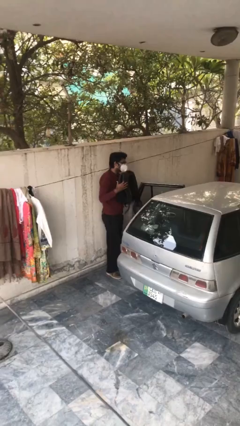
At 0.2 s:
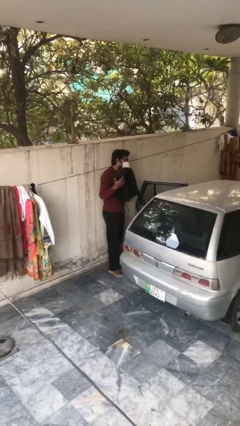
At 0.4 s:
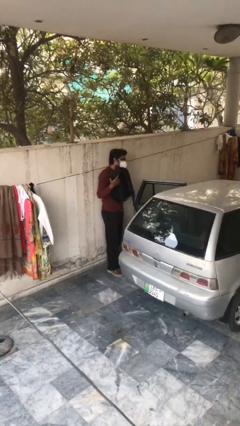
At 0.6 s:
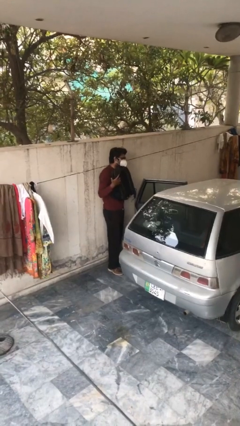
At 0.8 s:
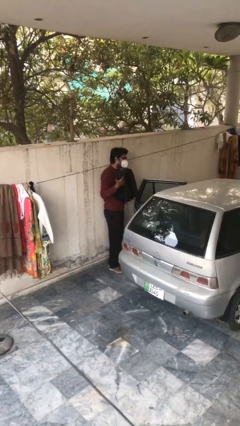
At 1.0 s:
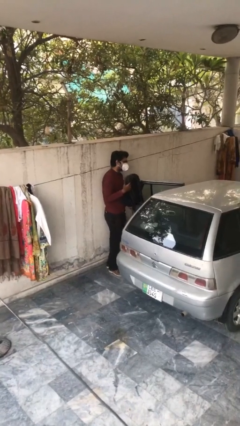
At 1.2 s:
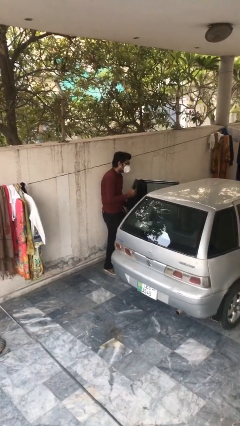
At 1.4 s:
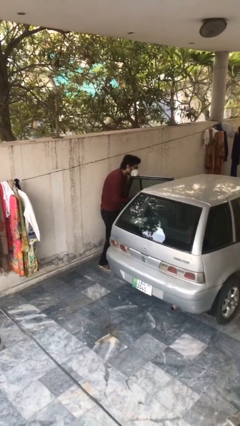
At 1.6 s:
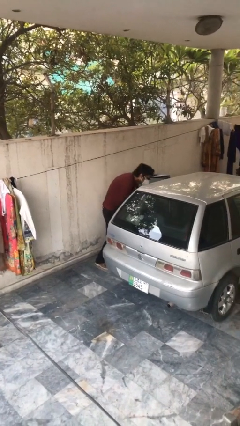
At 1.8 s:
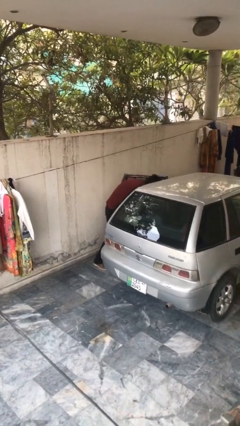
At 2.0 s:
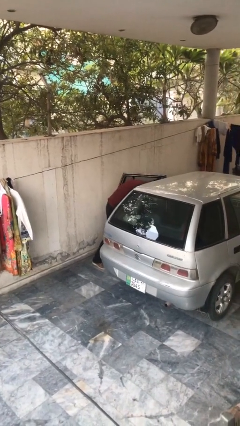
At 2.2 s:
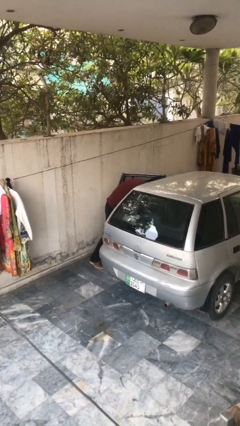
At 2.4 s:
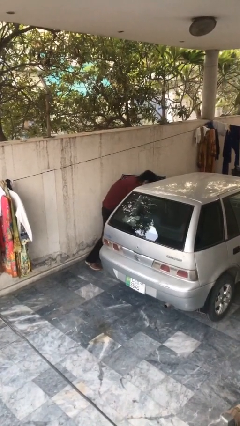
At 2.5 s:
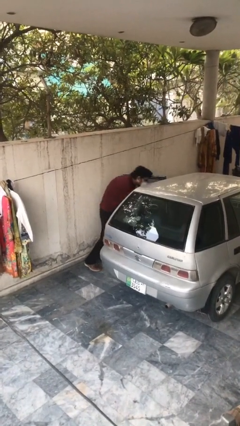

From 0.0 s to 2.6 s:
person loads car

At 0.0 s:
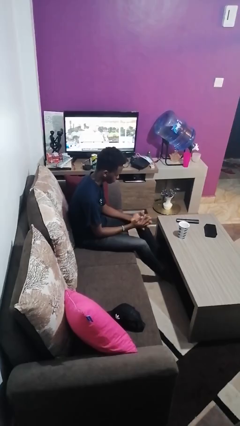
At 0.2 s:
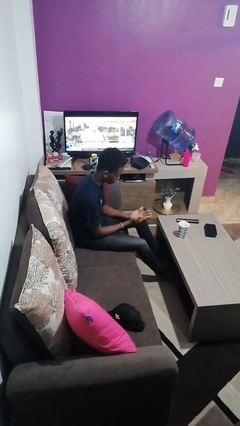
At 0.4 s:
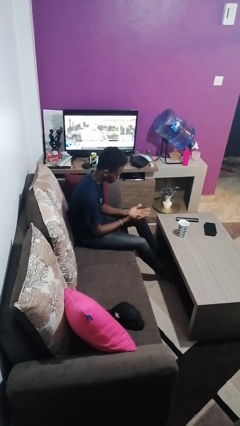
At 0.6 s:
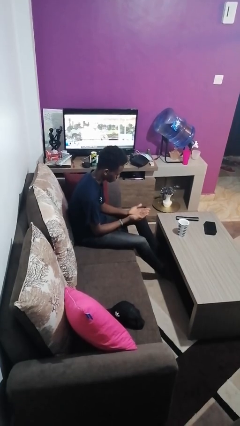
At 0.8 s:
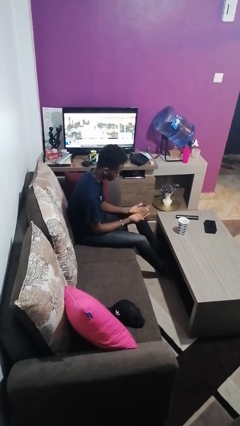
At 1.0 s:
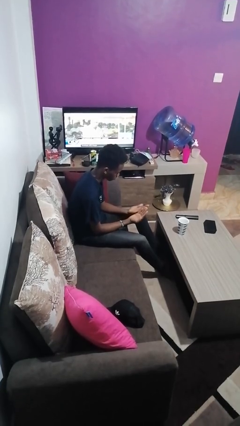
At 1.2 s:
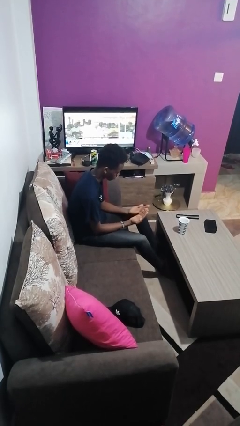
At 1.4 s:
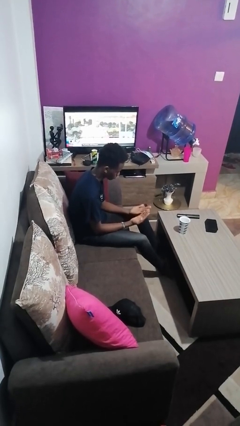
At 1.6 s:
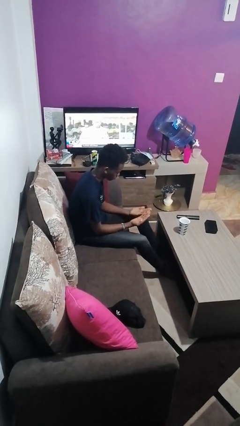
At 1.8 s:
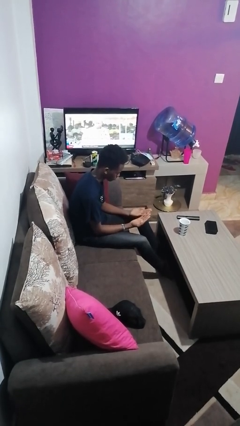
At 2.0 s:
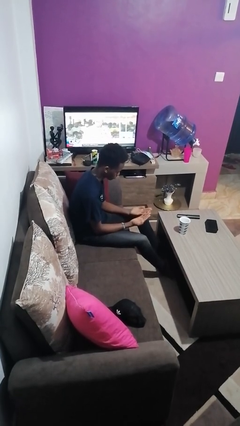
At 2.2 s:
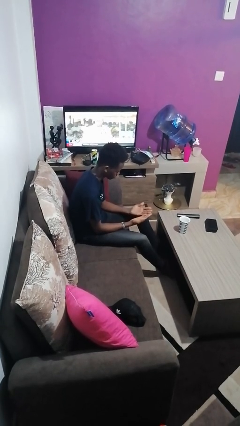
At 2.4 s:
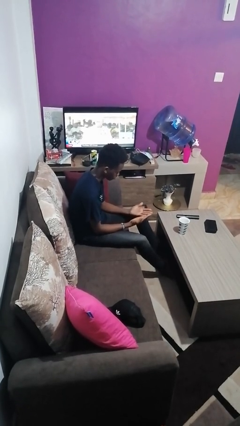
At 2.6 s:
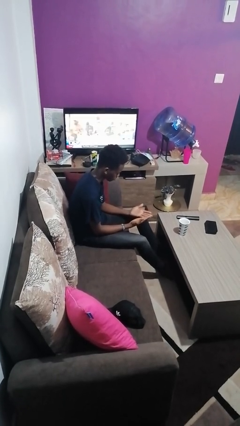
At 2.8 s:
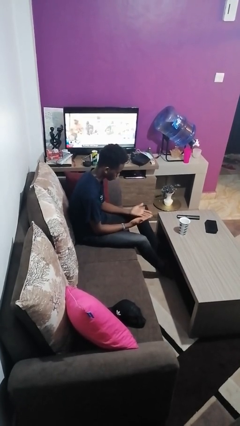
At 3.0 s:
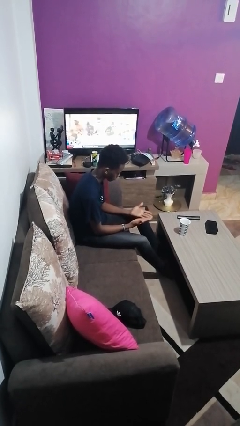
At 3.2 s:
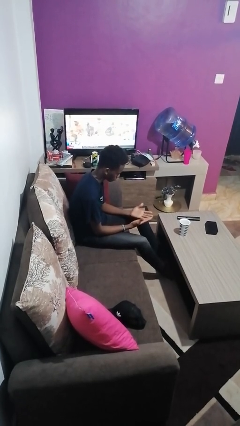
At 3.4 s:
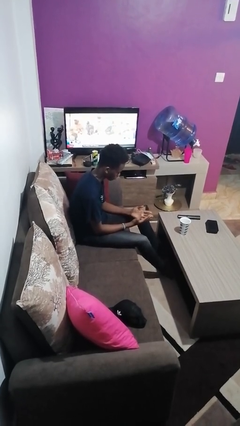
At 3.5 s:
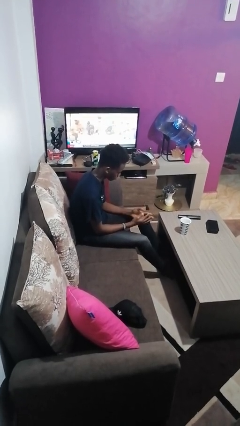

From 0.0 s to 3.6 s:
person looks at hands in lap

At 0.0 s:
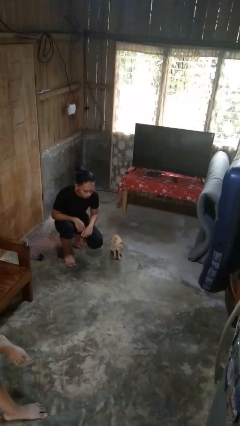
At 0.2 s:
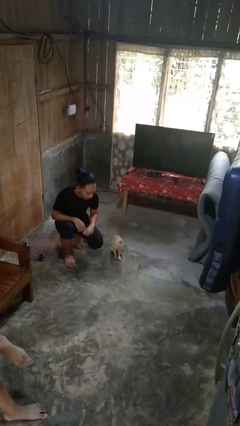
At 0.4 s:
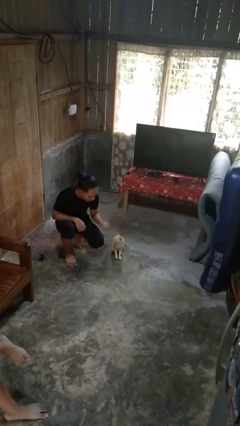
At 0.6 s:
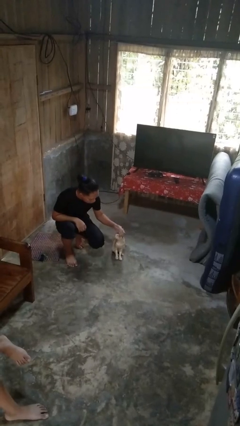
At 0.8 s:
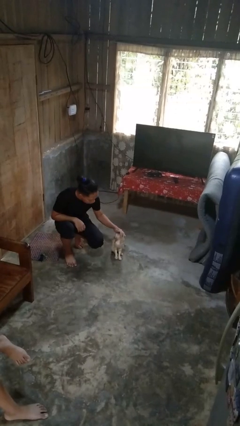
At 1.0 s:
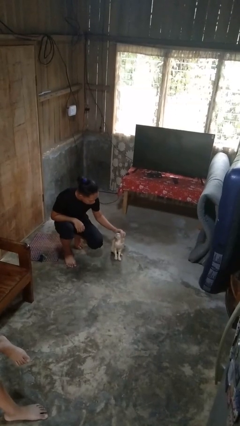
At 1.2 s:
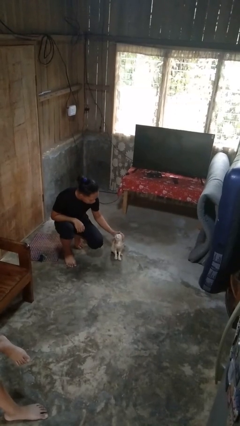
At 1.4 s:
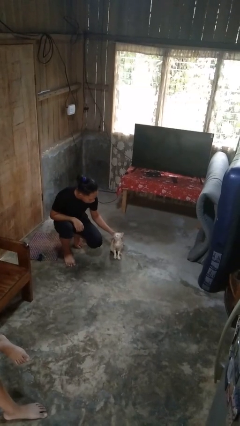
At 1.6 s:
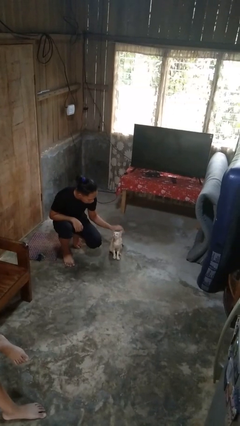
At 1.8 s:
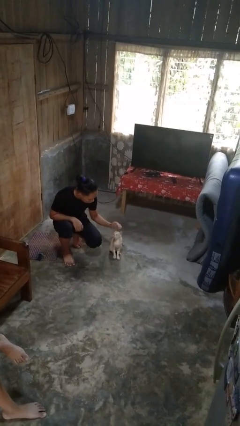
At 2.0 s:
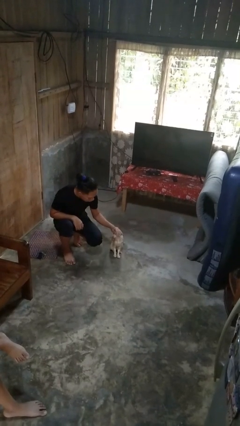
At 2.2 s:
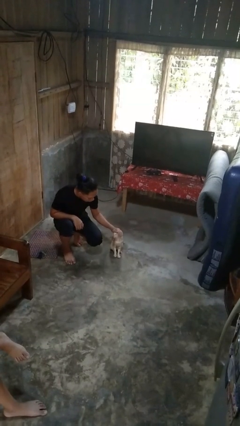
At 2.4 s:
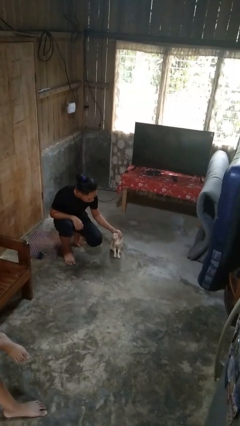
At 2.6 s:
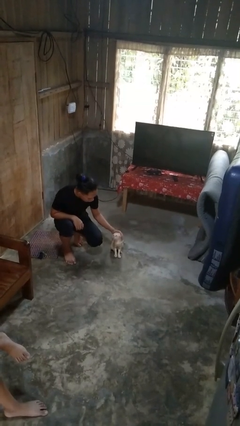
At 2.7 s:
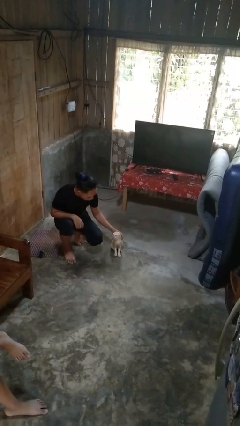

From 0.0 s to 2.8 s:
person pets cat

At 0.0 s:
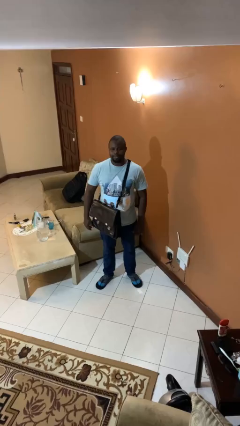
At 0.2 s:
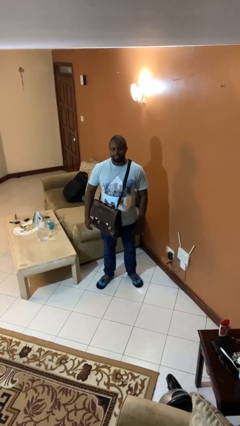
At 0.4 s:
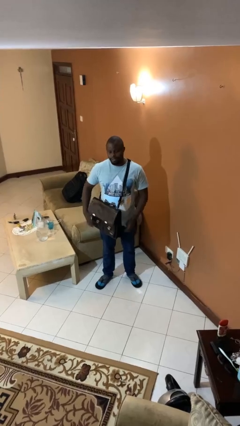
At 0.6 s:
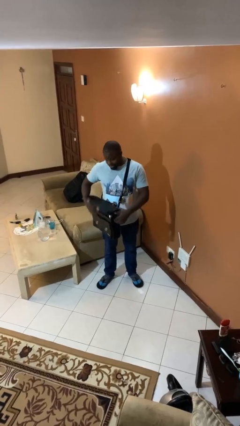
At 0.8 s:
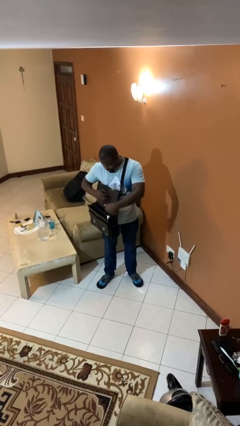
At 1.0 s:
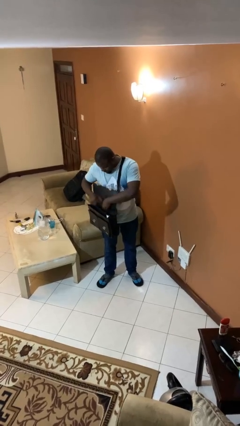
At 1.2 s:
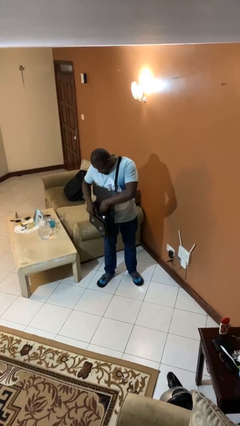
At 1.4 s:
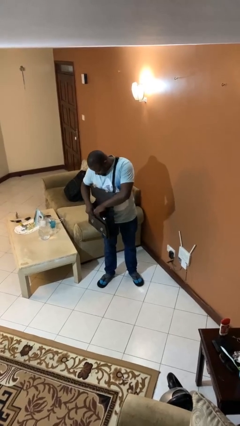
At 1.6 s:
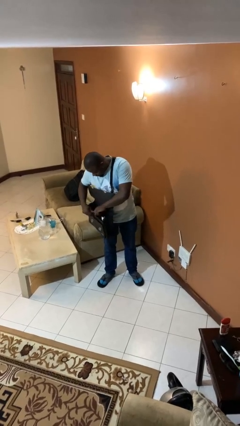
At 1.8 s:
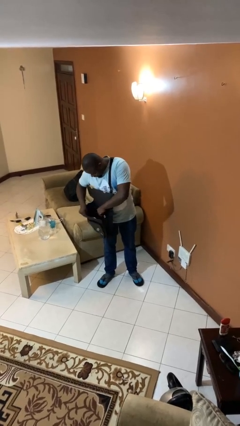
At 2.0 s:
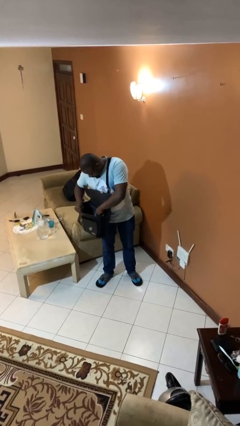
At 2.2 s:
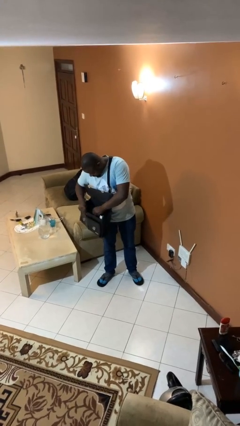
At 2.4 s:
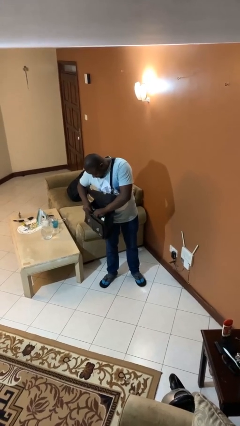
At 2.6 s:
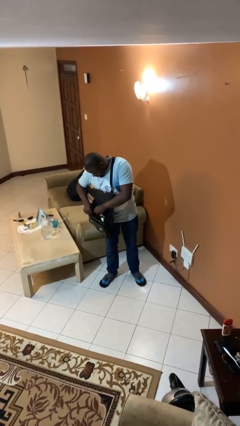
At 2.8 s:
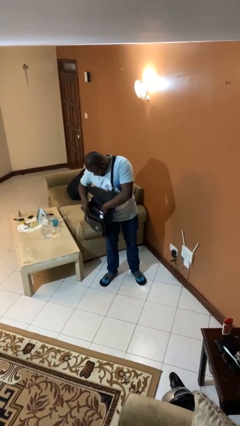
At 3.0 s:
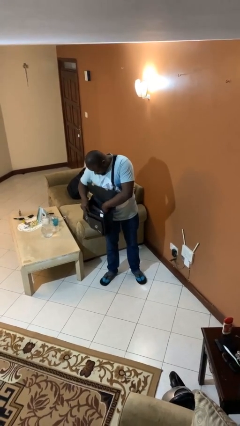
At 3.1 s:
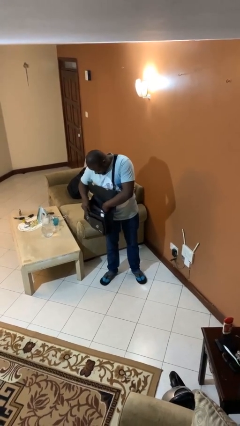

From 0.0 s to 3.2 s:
person searches in purse

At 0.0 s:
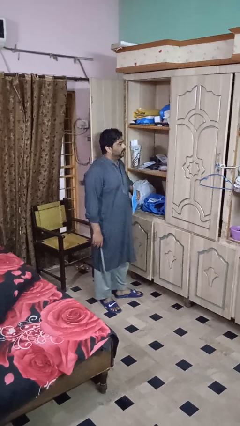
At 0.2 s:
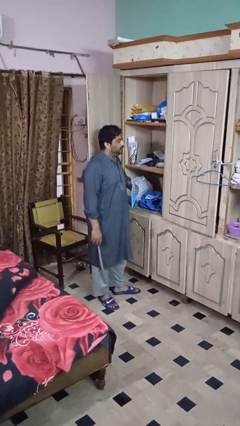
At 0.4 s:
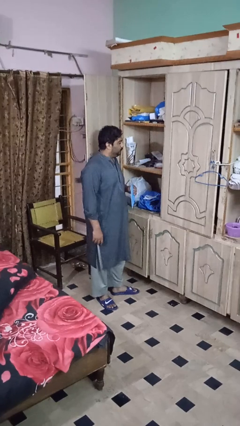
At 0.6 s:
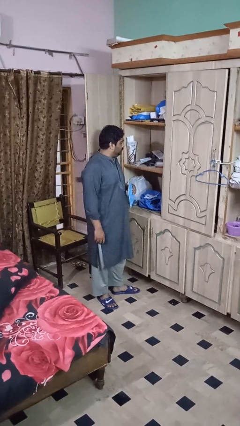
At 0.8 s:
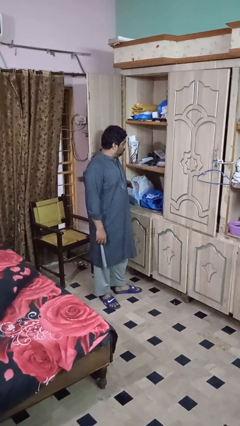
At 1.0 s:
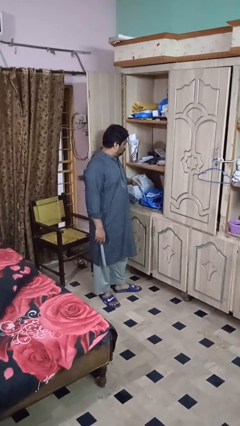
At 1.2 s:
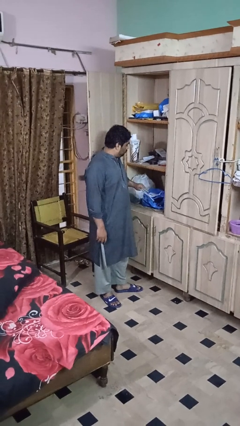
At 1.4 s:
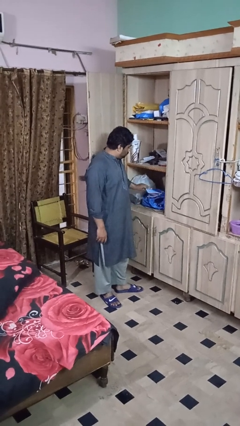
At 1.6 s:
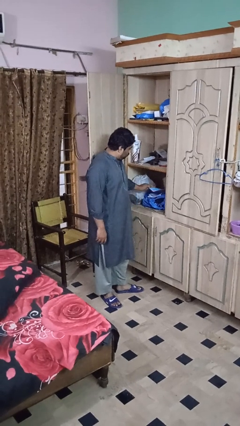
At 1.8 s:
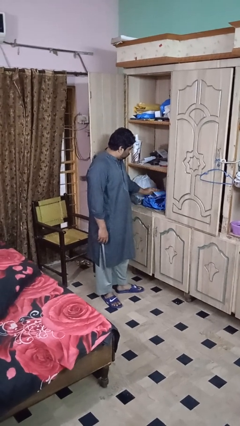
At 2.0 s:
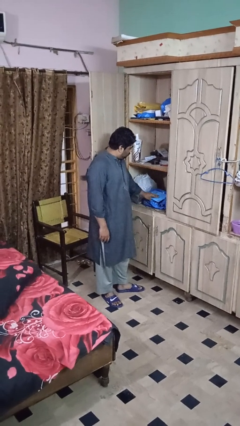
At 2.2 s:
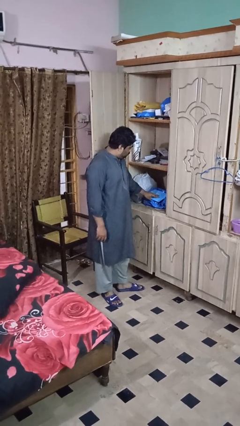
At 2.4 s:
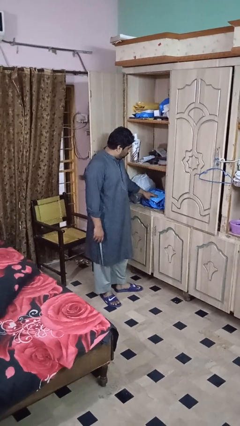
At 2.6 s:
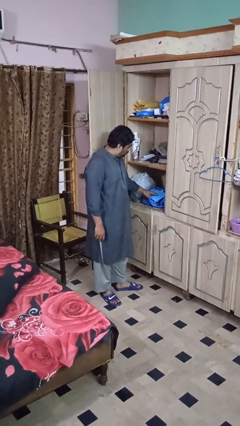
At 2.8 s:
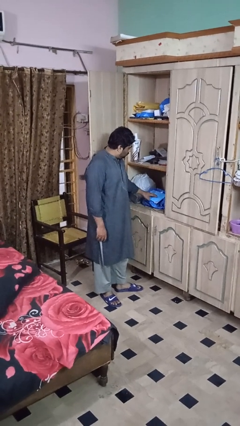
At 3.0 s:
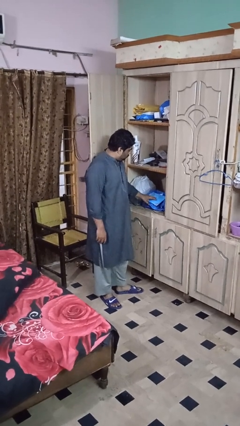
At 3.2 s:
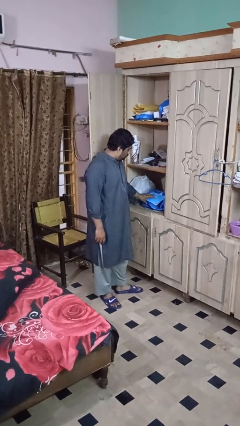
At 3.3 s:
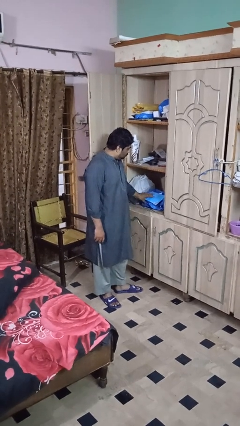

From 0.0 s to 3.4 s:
person puts down object on shelf

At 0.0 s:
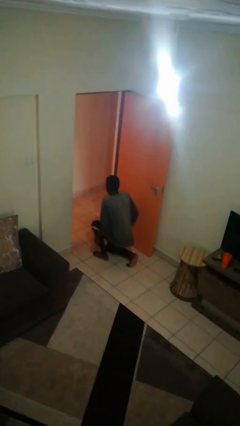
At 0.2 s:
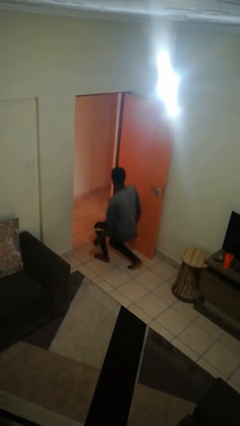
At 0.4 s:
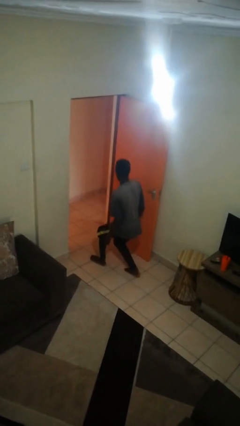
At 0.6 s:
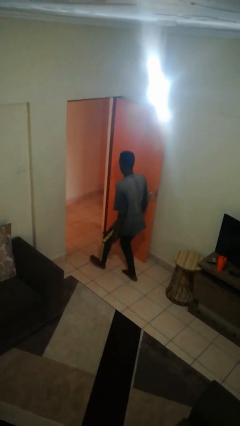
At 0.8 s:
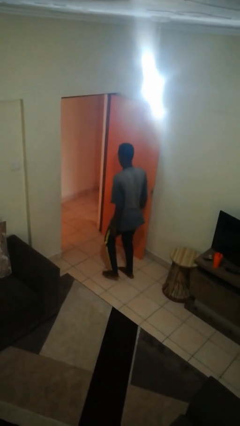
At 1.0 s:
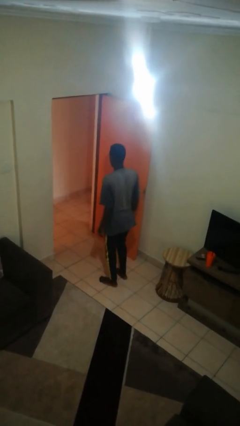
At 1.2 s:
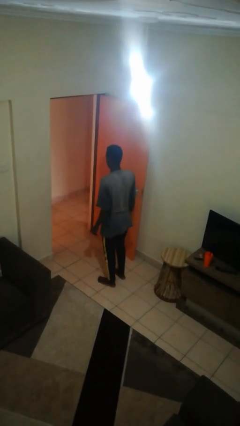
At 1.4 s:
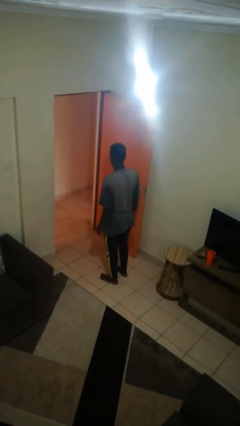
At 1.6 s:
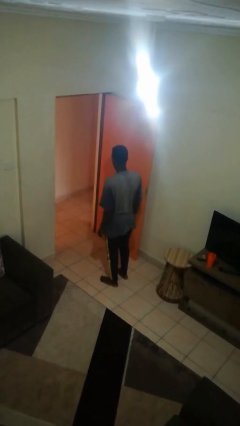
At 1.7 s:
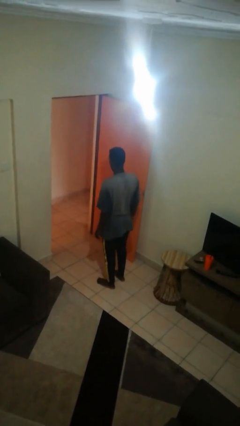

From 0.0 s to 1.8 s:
person stands up from floor
